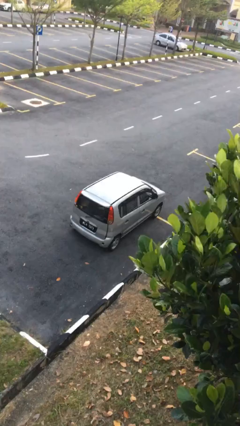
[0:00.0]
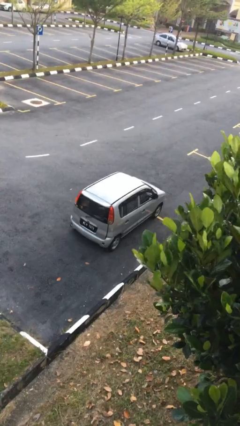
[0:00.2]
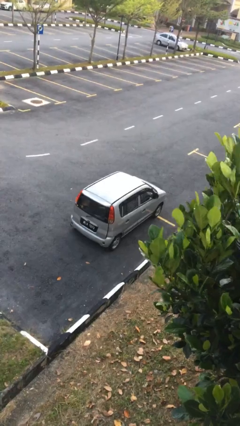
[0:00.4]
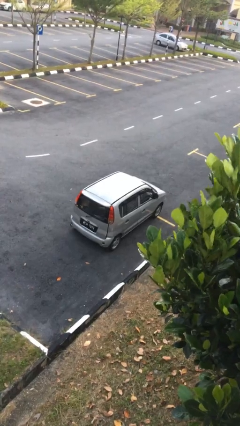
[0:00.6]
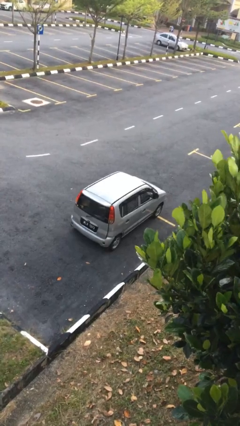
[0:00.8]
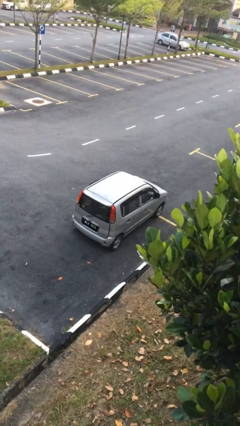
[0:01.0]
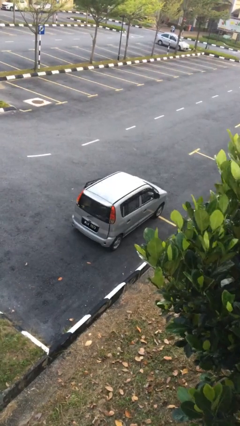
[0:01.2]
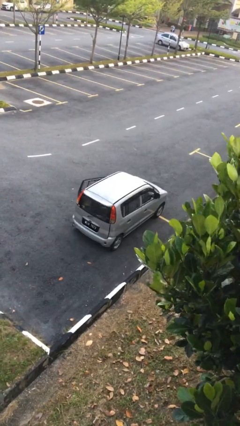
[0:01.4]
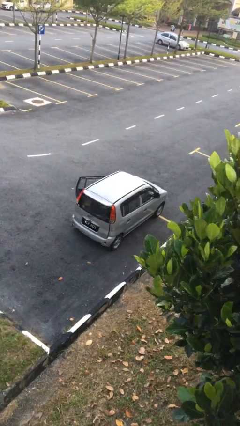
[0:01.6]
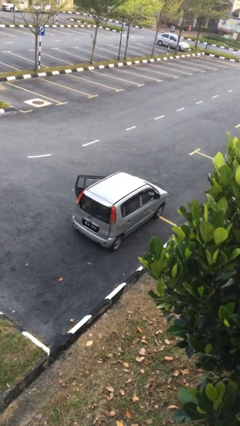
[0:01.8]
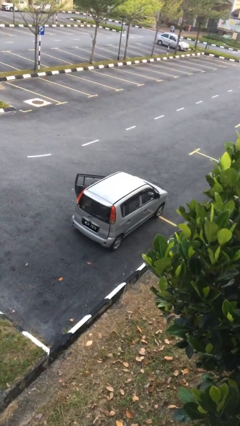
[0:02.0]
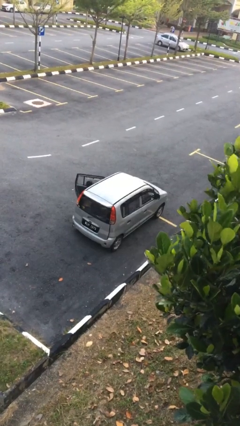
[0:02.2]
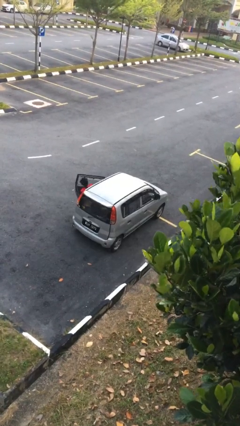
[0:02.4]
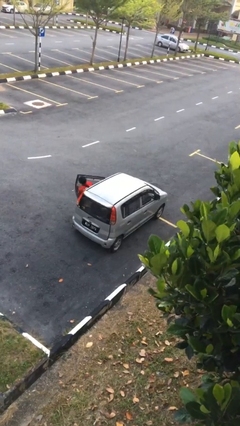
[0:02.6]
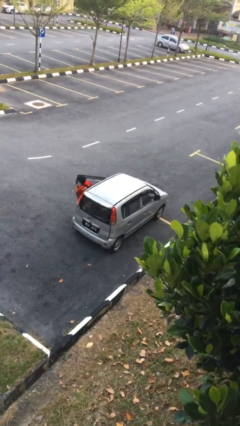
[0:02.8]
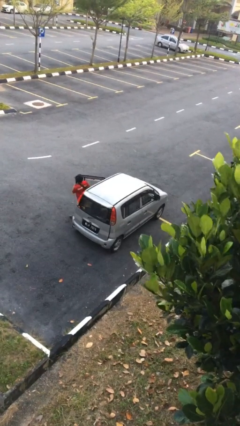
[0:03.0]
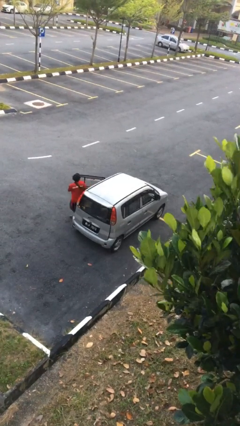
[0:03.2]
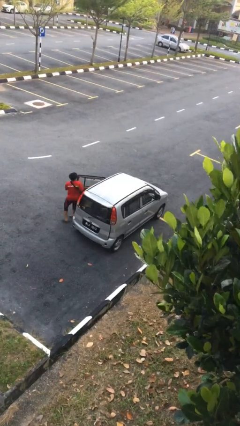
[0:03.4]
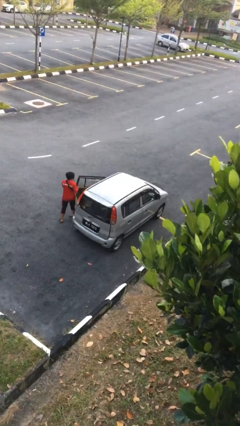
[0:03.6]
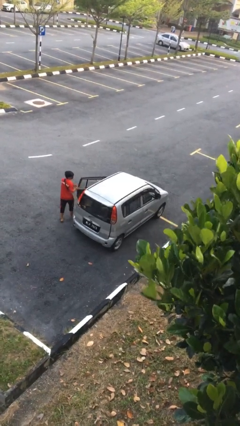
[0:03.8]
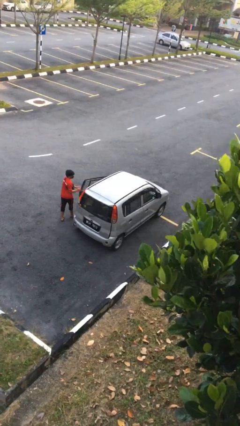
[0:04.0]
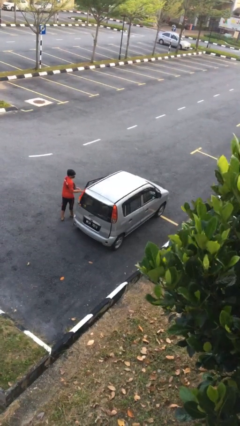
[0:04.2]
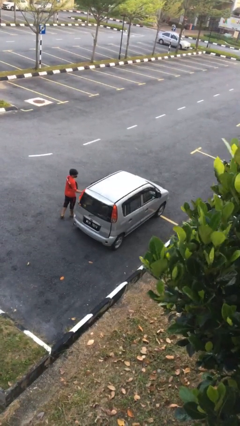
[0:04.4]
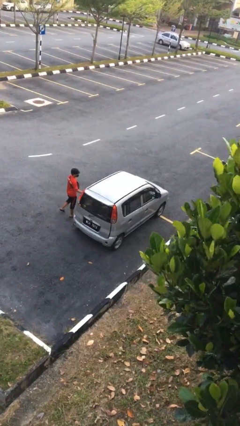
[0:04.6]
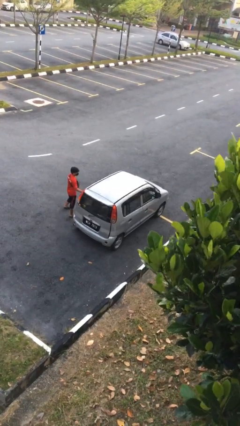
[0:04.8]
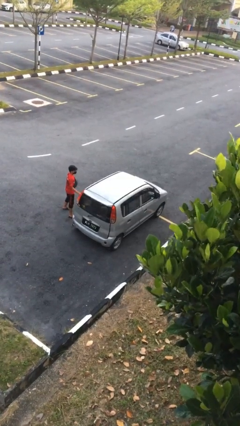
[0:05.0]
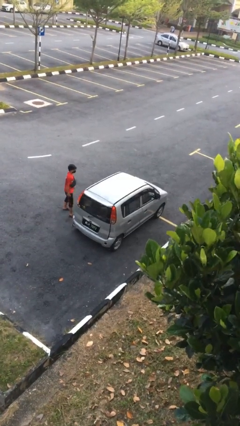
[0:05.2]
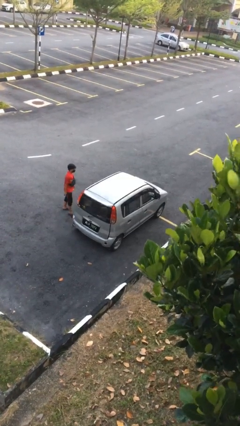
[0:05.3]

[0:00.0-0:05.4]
car drops off person

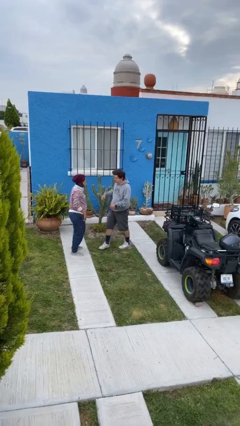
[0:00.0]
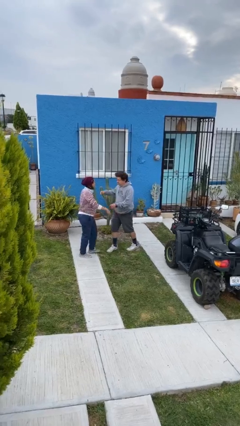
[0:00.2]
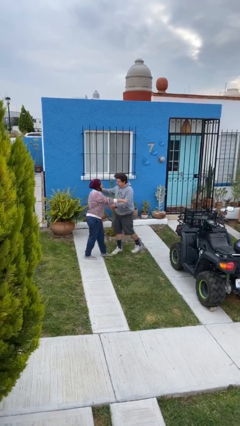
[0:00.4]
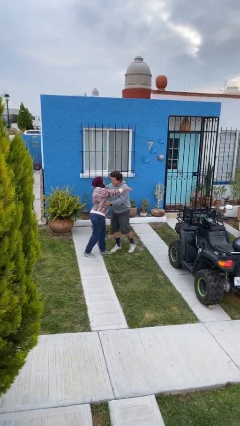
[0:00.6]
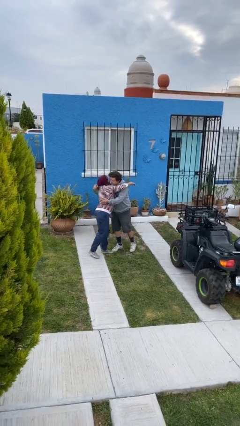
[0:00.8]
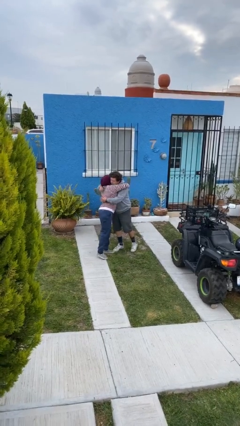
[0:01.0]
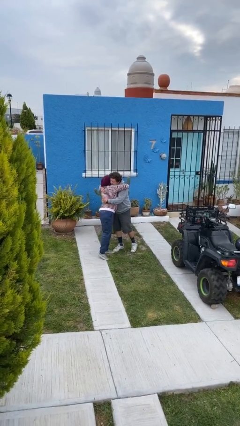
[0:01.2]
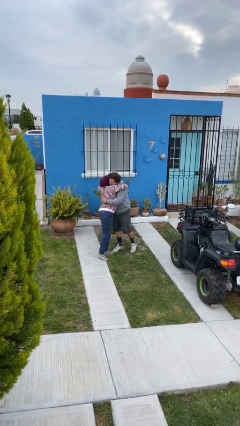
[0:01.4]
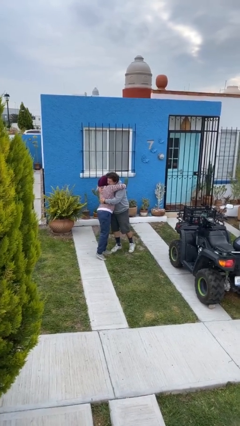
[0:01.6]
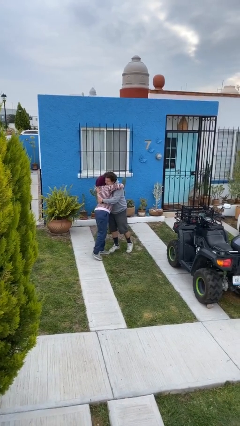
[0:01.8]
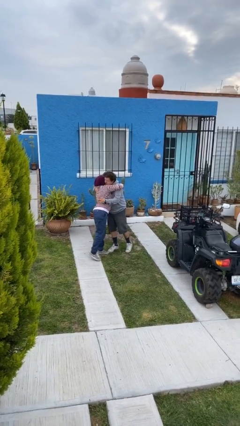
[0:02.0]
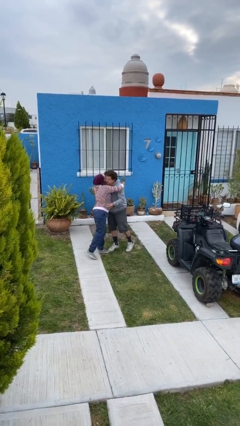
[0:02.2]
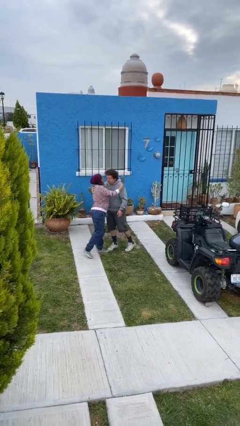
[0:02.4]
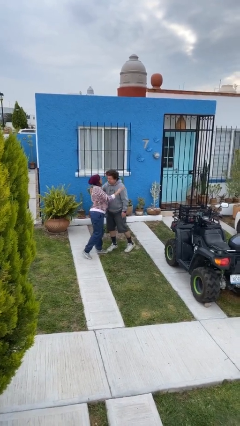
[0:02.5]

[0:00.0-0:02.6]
person embraces person

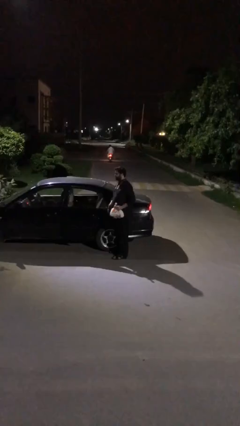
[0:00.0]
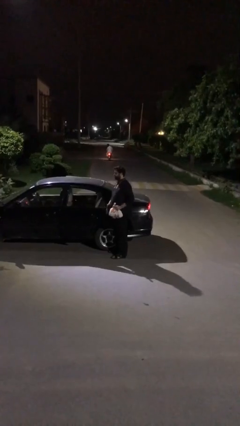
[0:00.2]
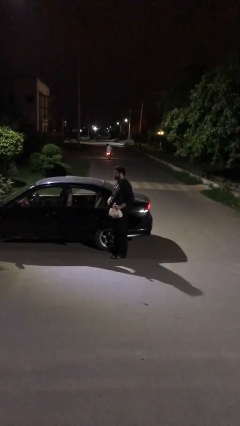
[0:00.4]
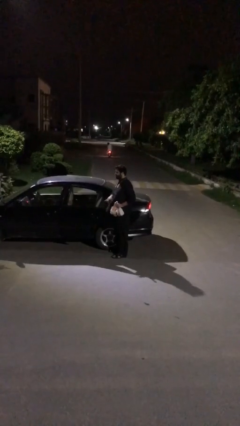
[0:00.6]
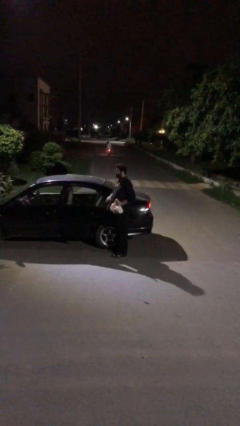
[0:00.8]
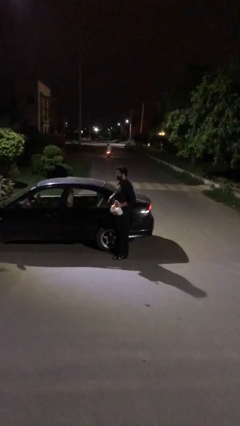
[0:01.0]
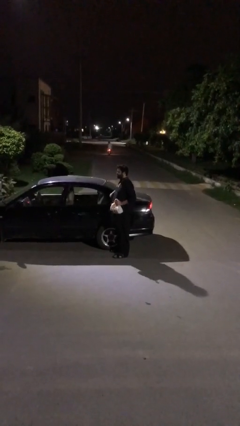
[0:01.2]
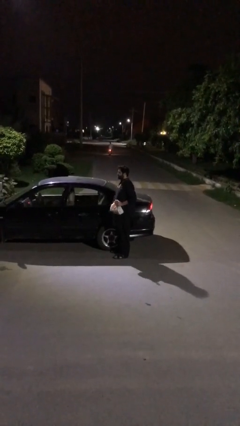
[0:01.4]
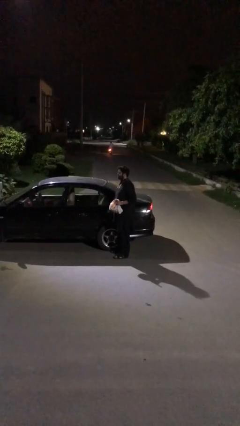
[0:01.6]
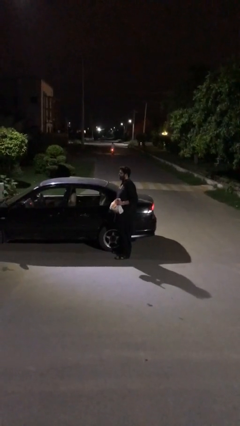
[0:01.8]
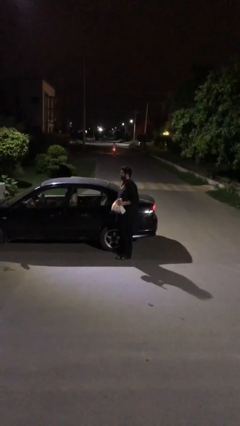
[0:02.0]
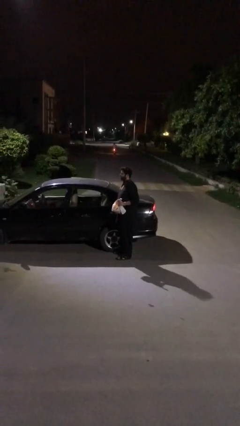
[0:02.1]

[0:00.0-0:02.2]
person closes car door

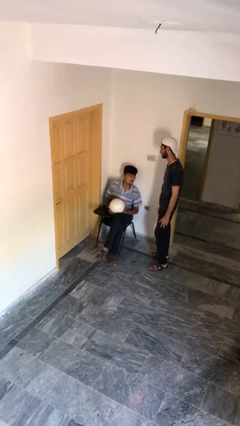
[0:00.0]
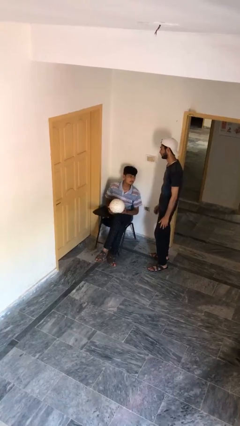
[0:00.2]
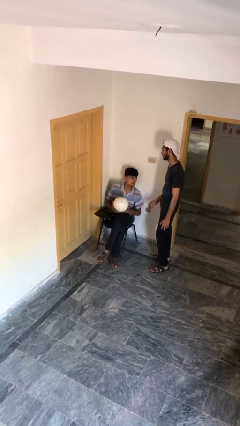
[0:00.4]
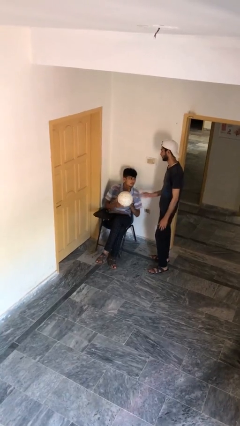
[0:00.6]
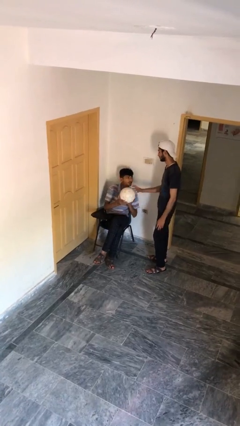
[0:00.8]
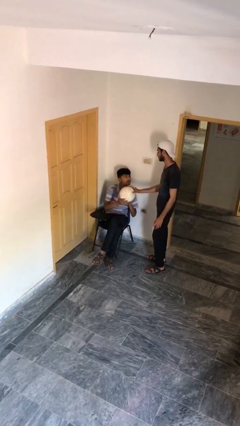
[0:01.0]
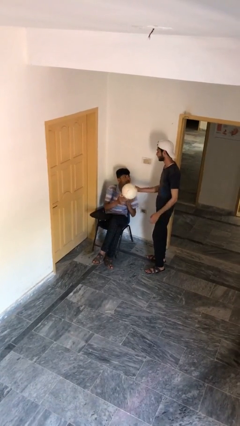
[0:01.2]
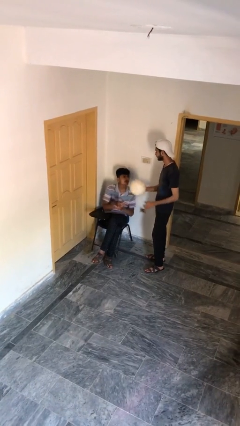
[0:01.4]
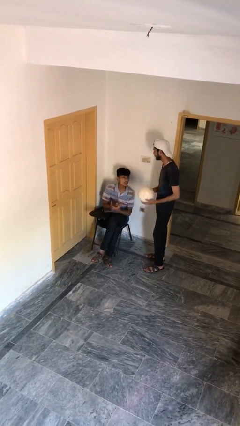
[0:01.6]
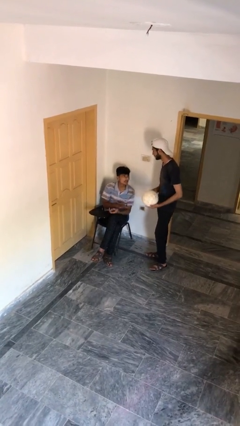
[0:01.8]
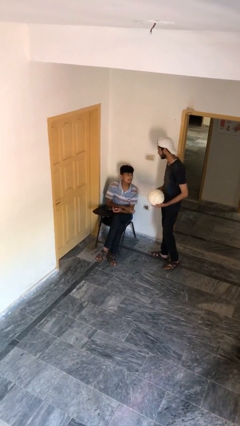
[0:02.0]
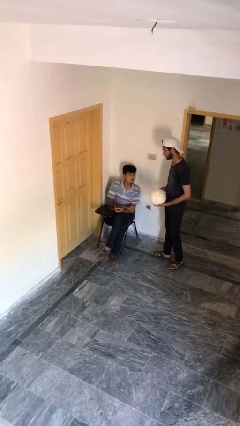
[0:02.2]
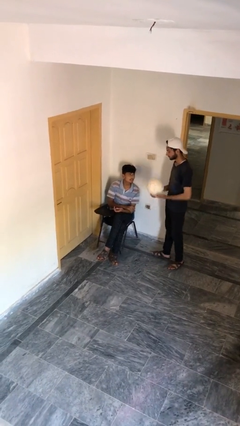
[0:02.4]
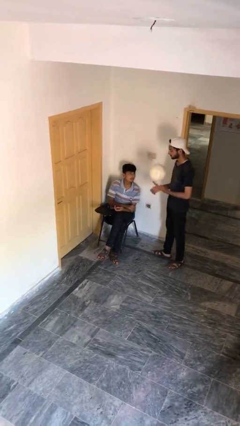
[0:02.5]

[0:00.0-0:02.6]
person transfers object to person

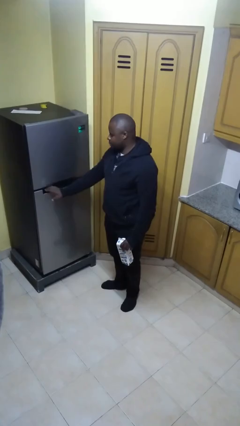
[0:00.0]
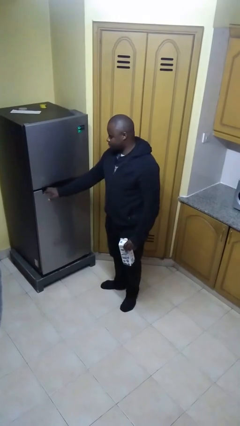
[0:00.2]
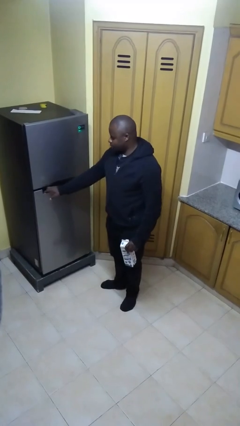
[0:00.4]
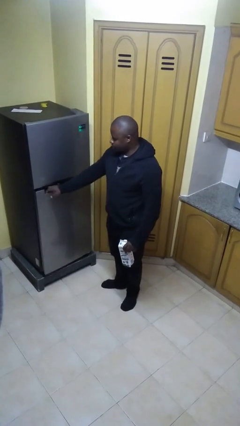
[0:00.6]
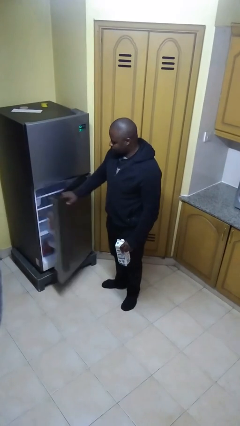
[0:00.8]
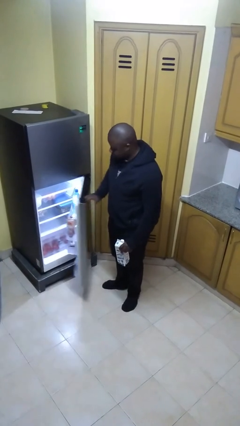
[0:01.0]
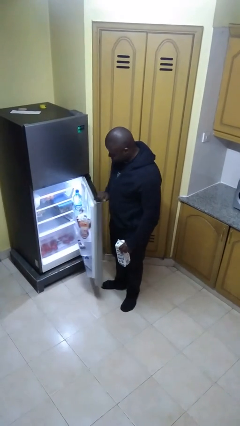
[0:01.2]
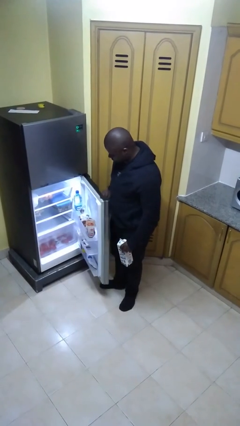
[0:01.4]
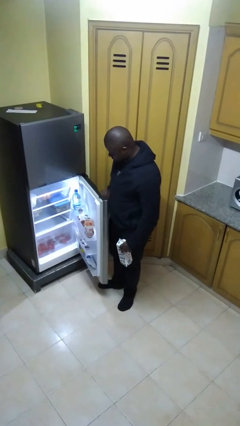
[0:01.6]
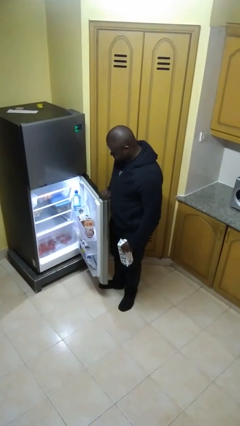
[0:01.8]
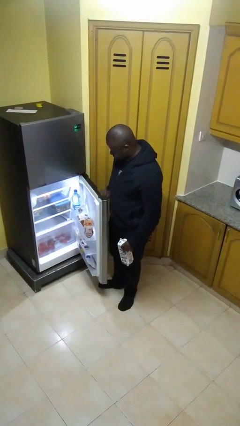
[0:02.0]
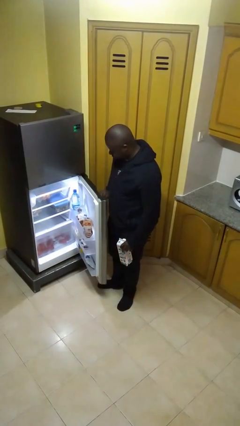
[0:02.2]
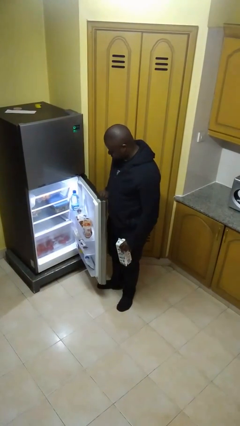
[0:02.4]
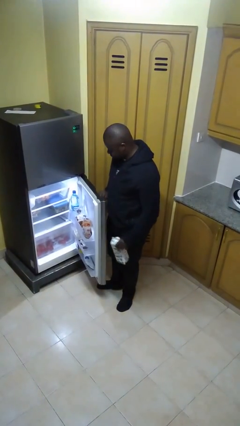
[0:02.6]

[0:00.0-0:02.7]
person opens refrigerator

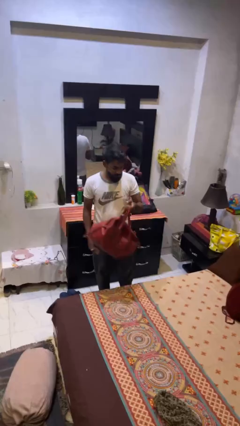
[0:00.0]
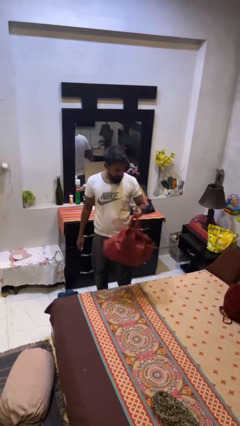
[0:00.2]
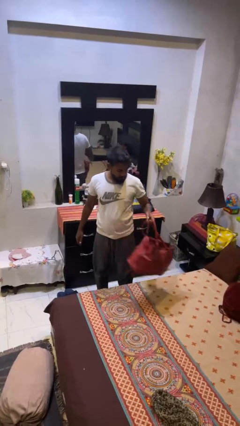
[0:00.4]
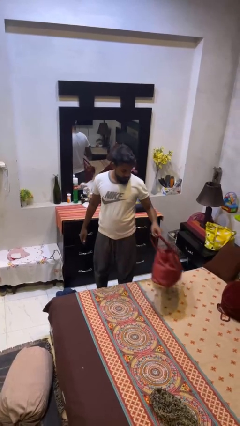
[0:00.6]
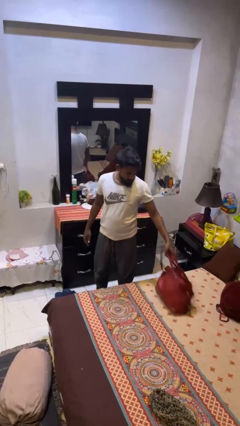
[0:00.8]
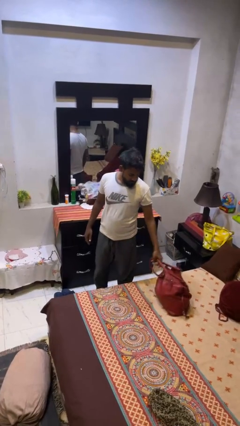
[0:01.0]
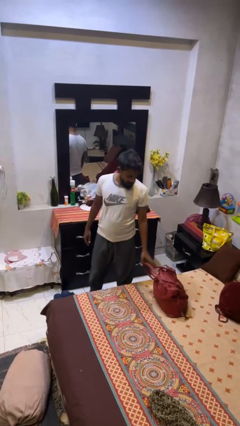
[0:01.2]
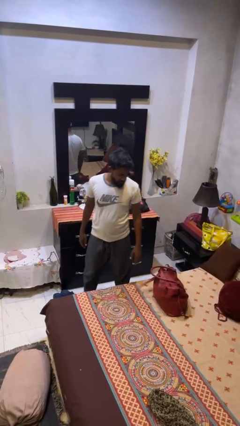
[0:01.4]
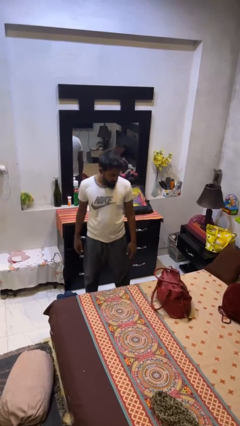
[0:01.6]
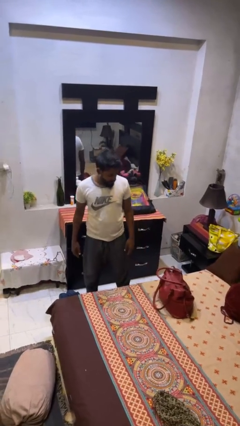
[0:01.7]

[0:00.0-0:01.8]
person puts down object on bed

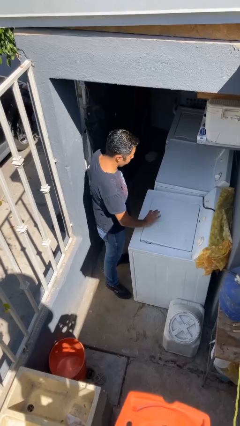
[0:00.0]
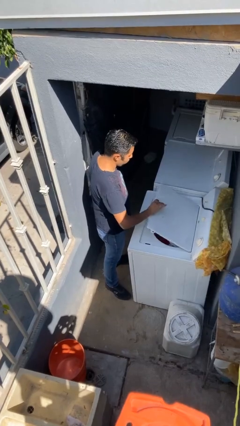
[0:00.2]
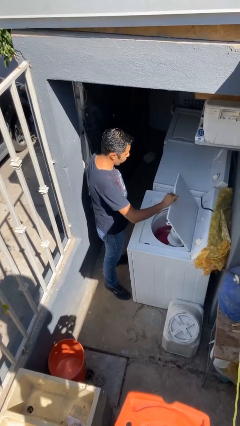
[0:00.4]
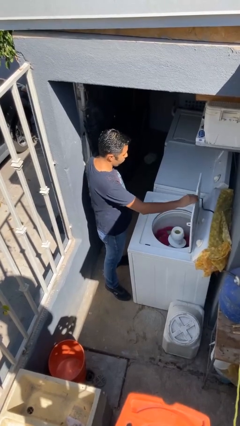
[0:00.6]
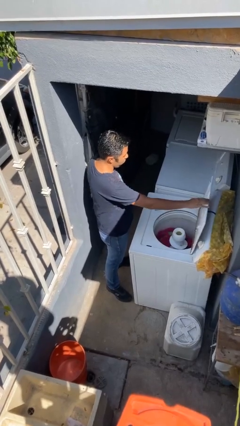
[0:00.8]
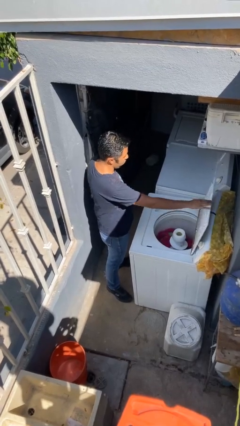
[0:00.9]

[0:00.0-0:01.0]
person opens clothes washer
